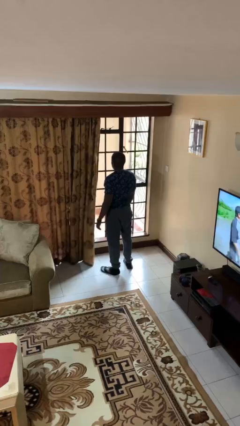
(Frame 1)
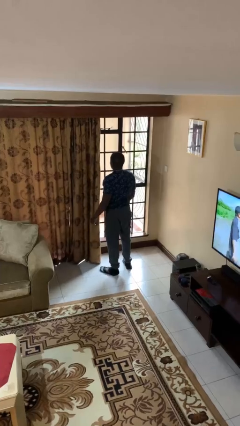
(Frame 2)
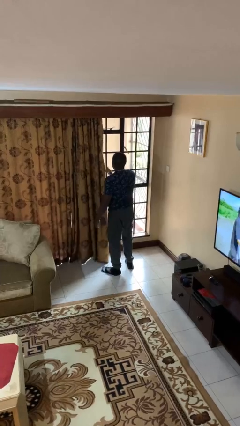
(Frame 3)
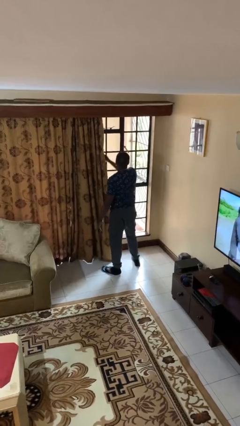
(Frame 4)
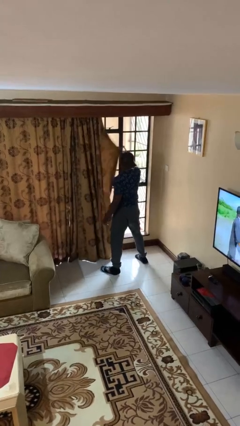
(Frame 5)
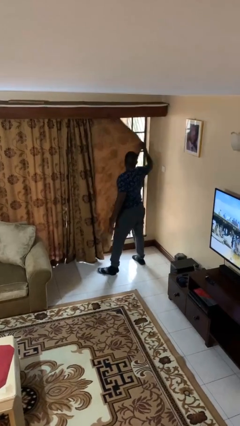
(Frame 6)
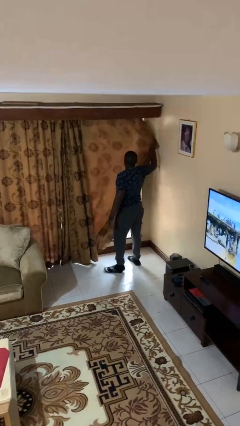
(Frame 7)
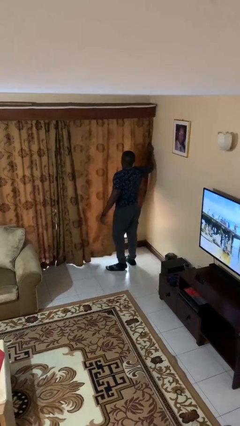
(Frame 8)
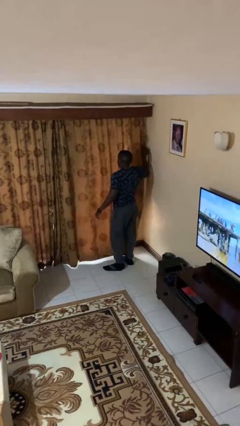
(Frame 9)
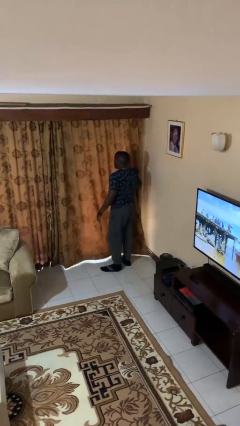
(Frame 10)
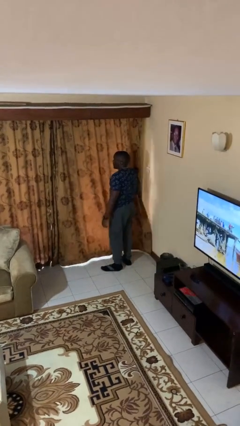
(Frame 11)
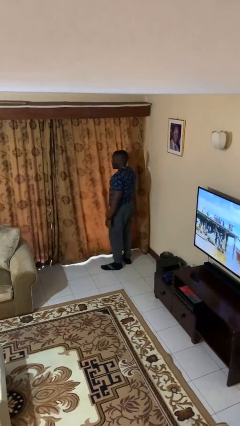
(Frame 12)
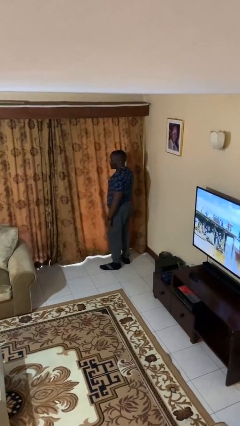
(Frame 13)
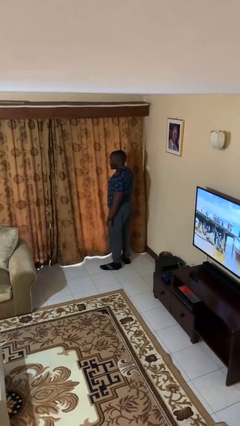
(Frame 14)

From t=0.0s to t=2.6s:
person closes curtains

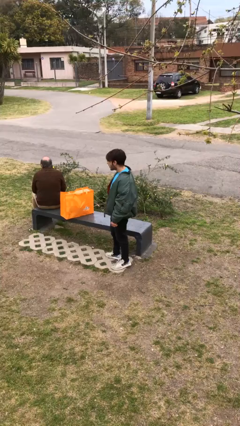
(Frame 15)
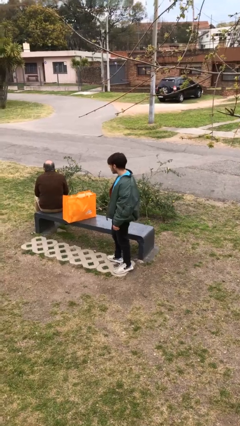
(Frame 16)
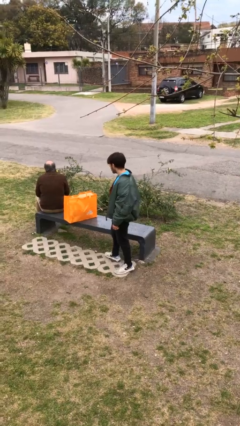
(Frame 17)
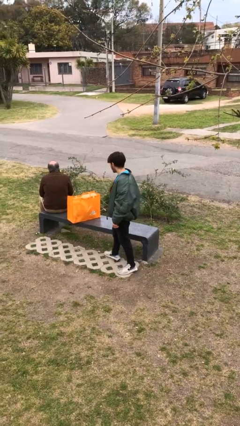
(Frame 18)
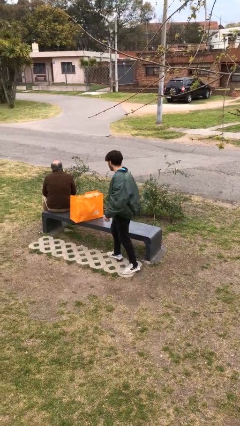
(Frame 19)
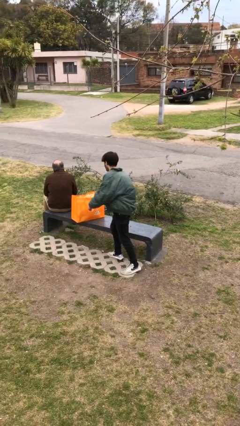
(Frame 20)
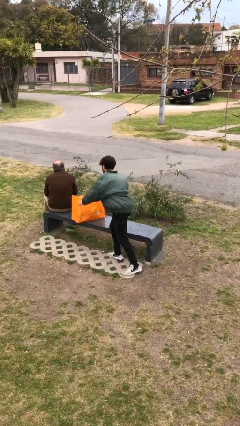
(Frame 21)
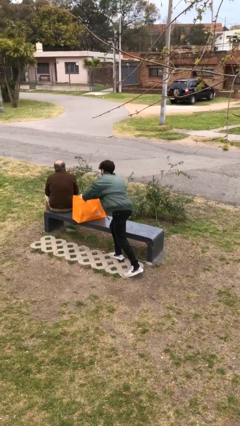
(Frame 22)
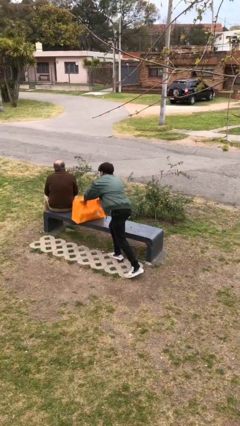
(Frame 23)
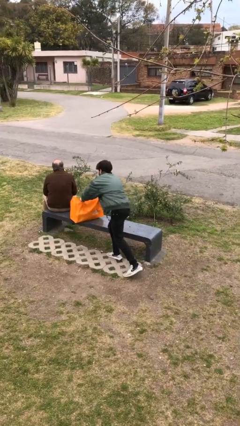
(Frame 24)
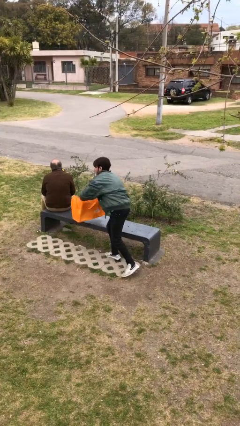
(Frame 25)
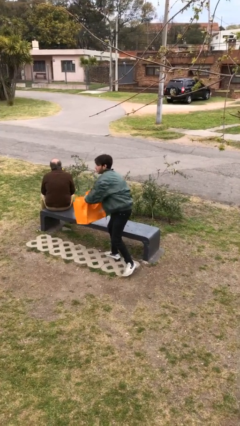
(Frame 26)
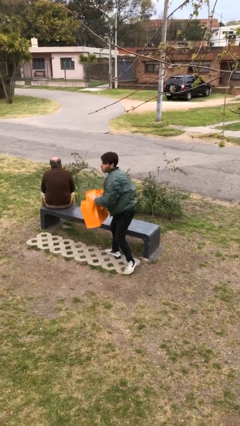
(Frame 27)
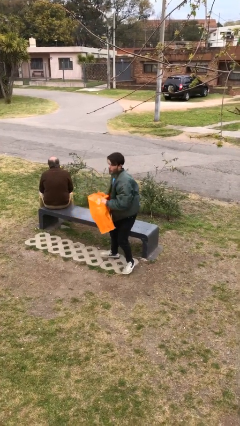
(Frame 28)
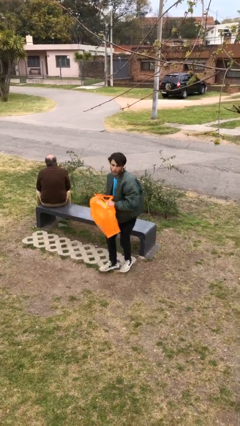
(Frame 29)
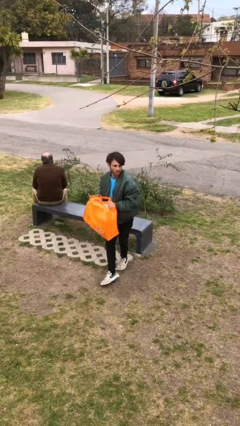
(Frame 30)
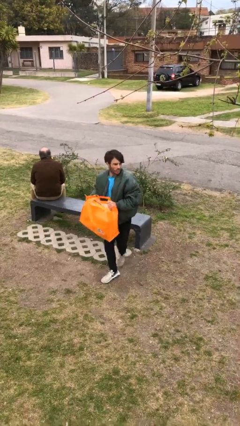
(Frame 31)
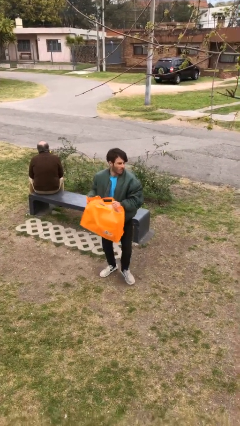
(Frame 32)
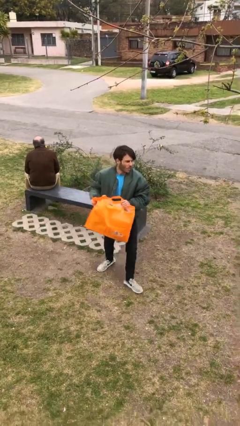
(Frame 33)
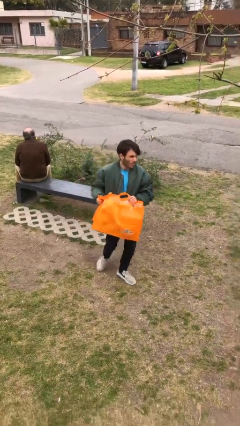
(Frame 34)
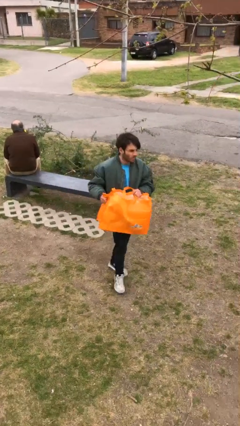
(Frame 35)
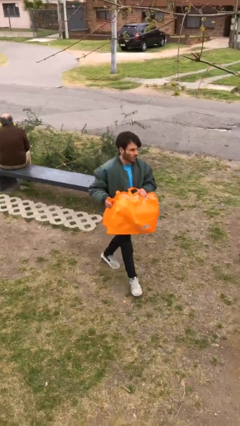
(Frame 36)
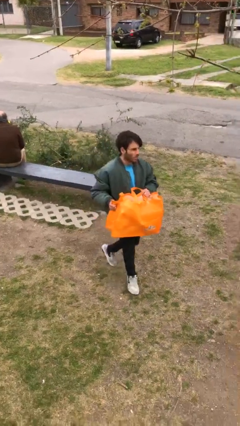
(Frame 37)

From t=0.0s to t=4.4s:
person steals object from person

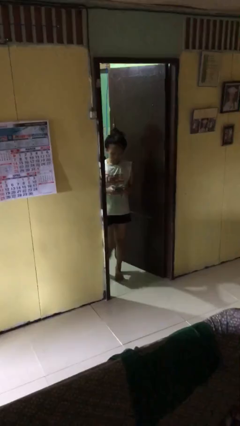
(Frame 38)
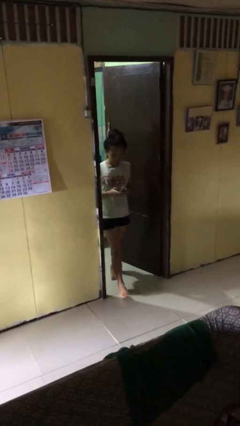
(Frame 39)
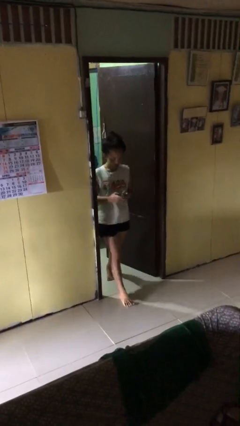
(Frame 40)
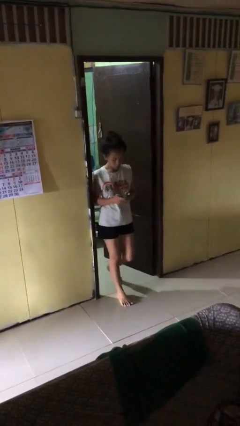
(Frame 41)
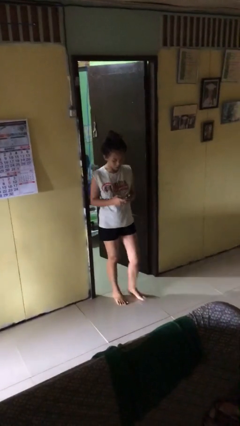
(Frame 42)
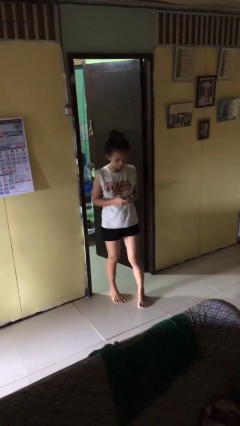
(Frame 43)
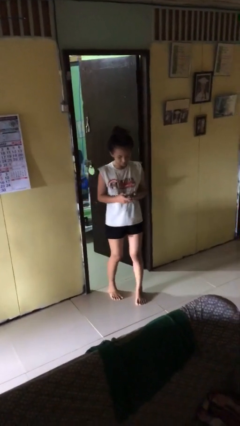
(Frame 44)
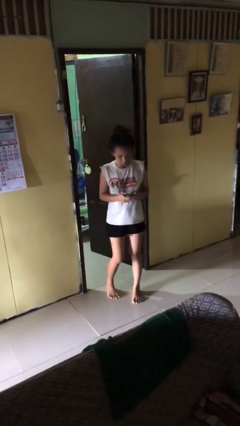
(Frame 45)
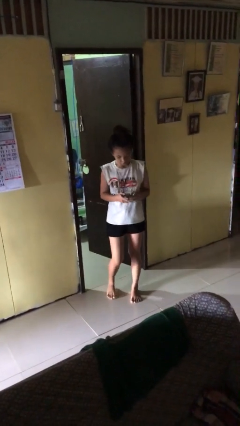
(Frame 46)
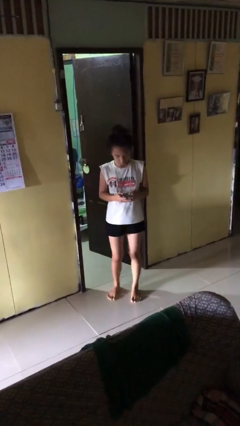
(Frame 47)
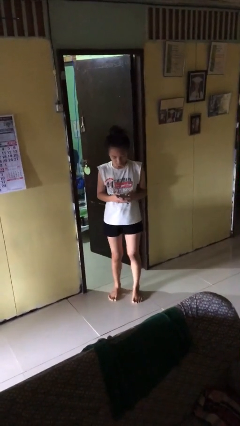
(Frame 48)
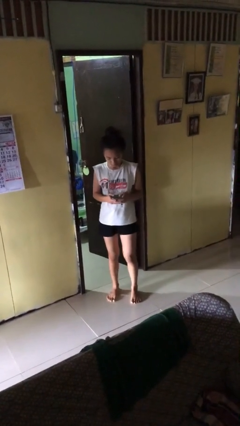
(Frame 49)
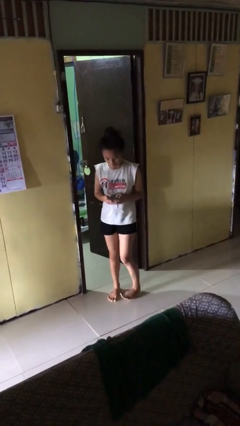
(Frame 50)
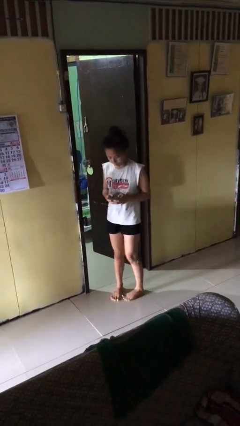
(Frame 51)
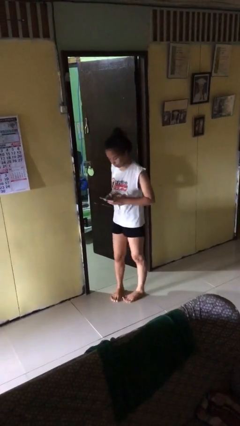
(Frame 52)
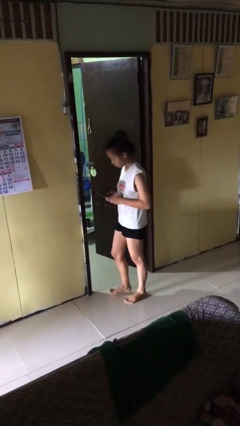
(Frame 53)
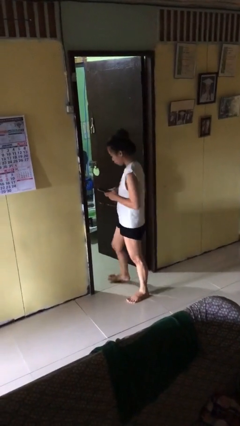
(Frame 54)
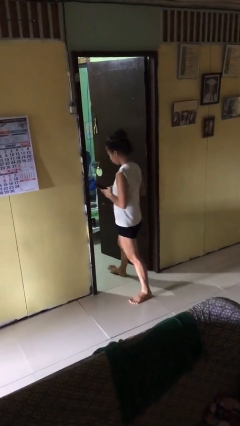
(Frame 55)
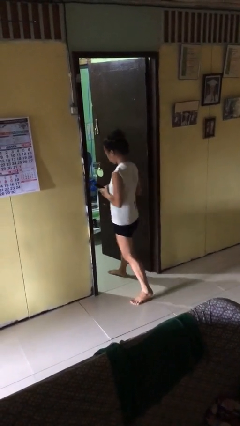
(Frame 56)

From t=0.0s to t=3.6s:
person enters scene through structure

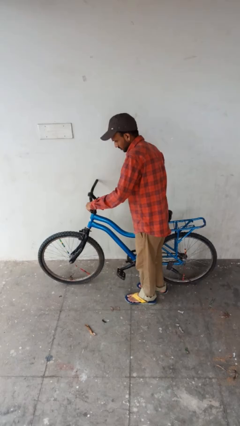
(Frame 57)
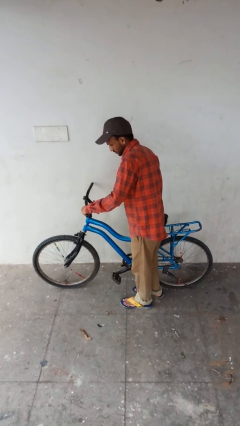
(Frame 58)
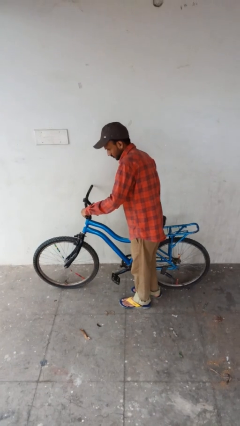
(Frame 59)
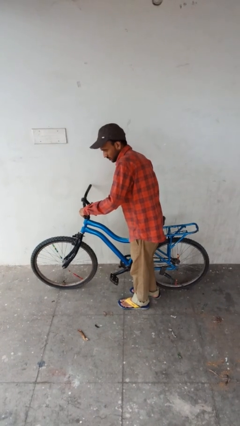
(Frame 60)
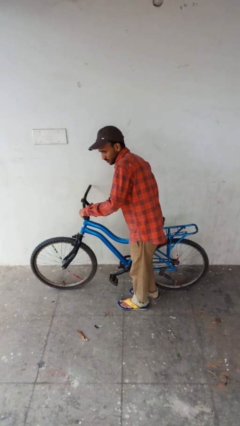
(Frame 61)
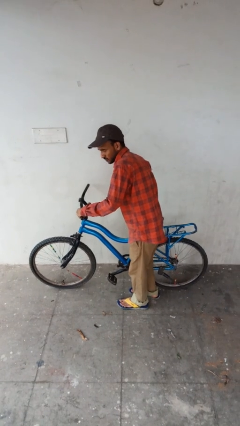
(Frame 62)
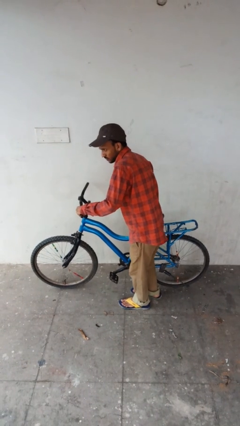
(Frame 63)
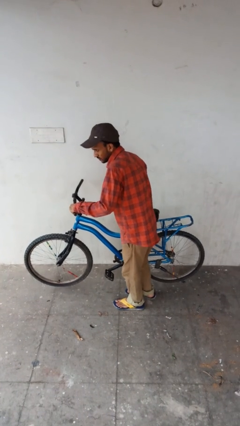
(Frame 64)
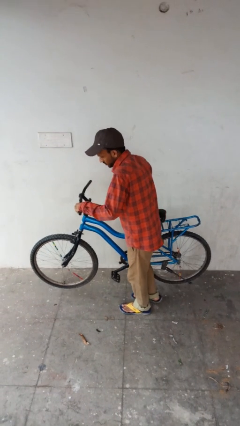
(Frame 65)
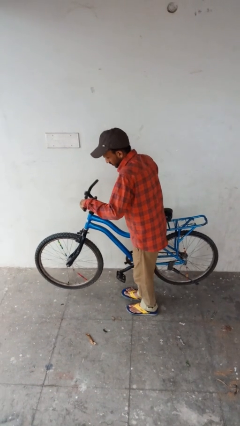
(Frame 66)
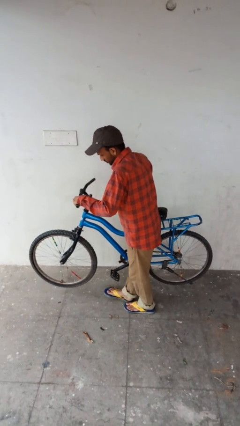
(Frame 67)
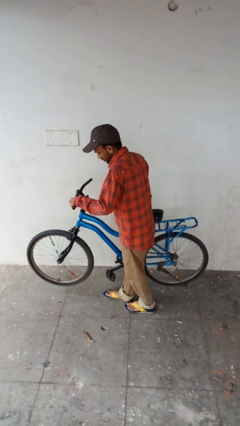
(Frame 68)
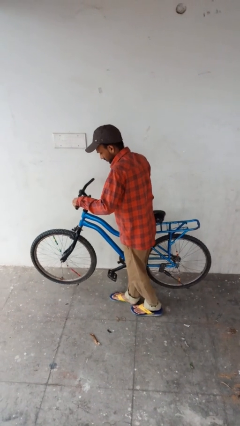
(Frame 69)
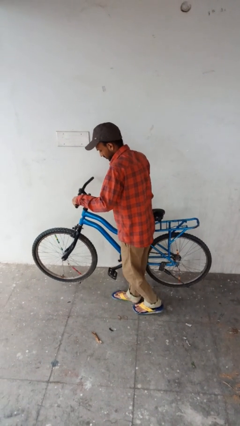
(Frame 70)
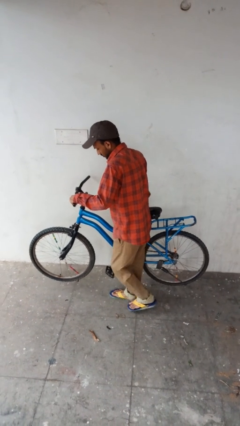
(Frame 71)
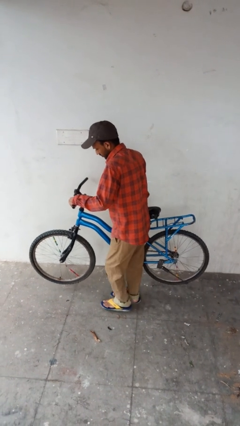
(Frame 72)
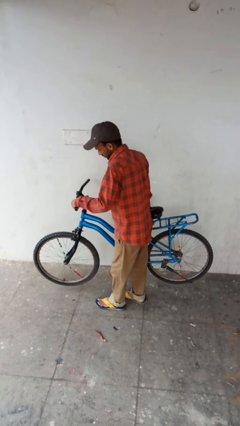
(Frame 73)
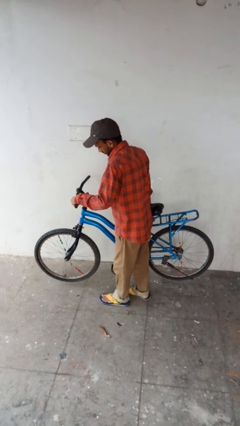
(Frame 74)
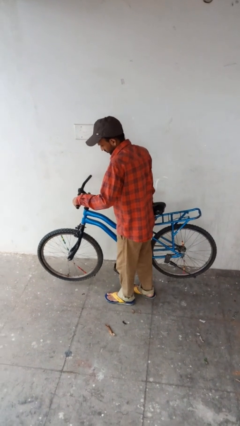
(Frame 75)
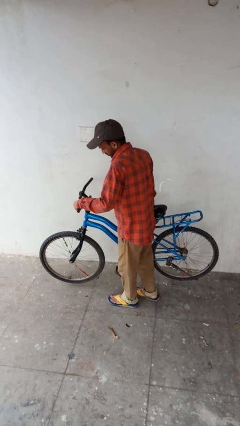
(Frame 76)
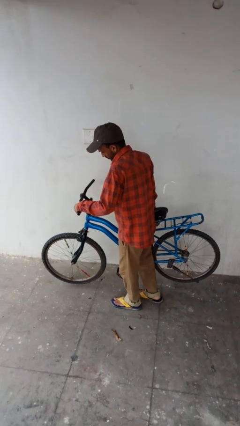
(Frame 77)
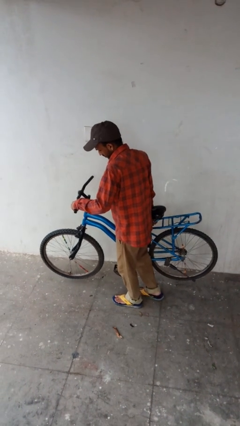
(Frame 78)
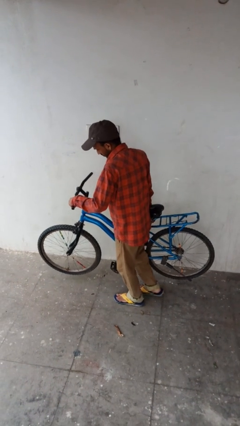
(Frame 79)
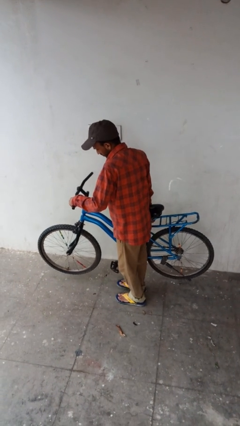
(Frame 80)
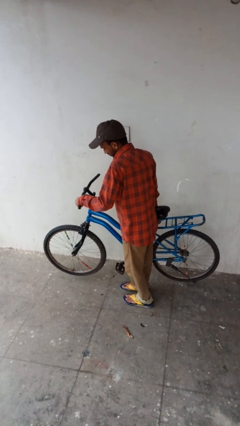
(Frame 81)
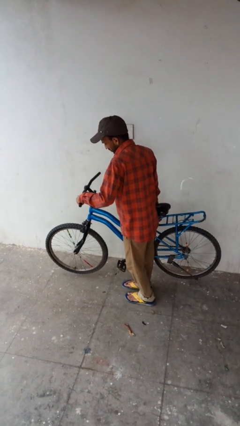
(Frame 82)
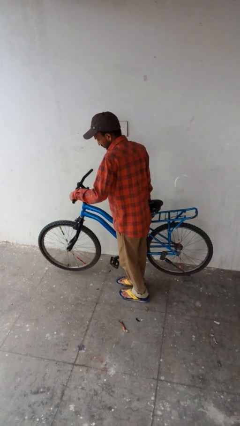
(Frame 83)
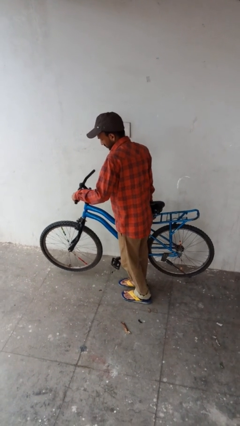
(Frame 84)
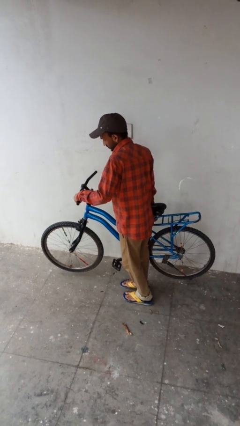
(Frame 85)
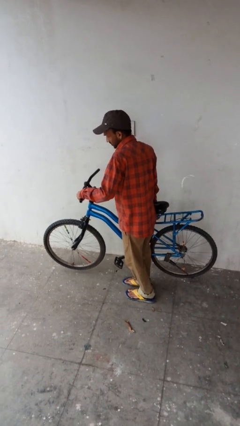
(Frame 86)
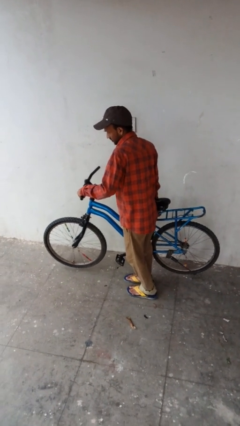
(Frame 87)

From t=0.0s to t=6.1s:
person carries bicycle

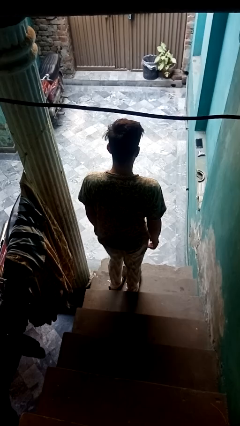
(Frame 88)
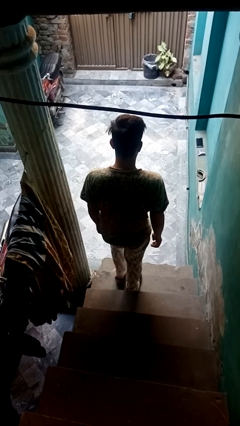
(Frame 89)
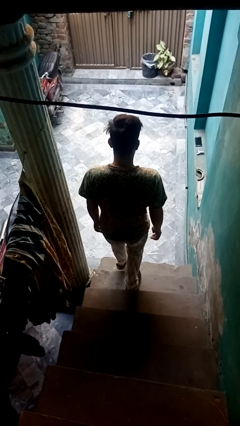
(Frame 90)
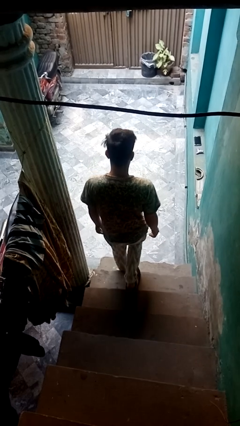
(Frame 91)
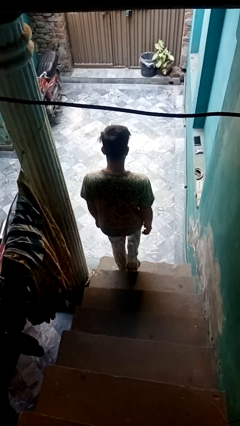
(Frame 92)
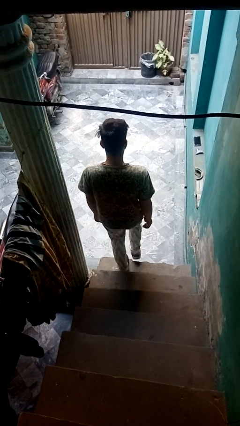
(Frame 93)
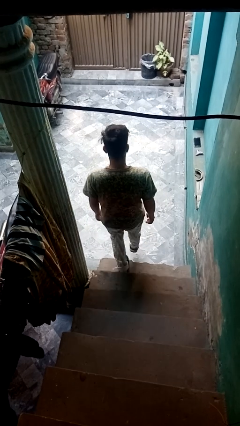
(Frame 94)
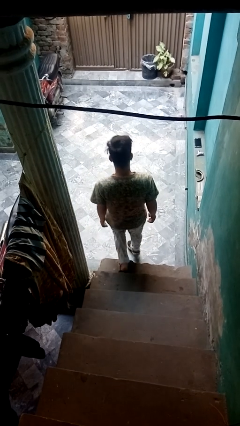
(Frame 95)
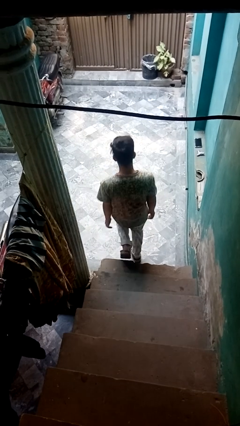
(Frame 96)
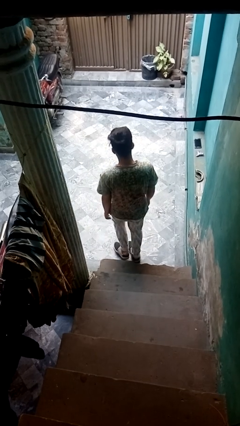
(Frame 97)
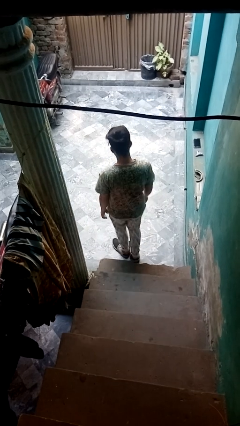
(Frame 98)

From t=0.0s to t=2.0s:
person climbs down stairs
